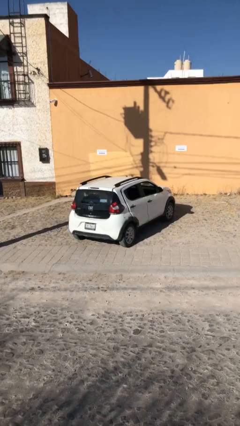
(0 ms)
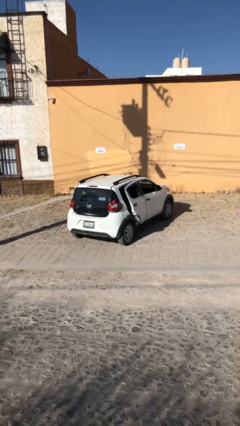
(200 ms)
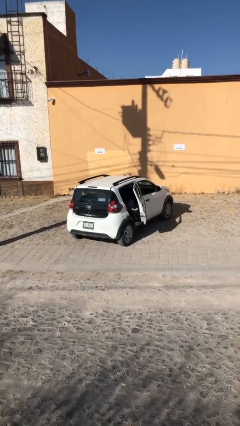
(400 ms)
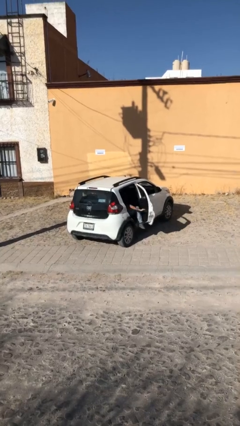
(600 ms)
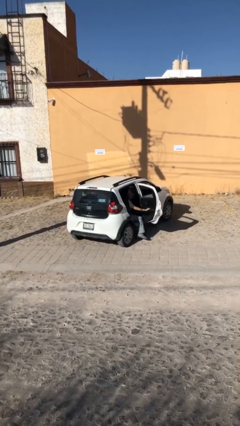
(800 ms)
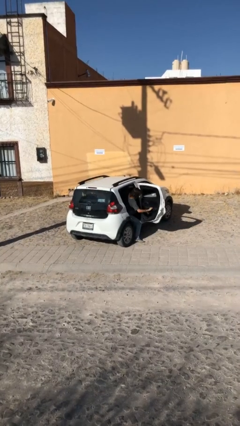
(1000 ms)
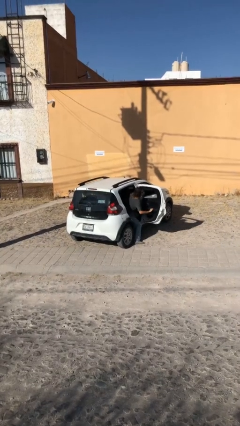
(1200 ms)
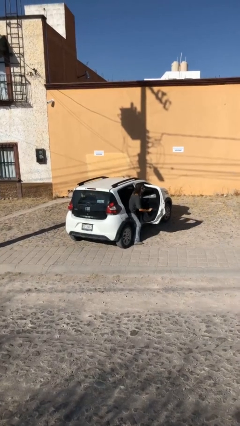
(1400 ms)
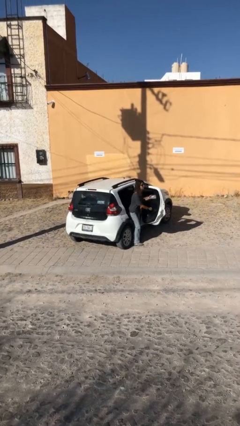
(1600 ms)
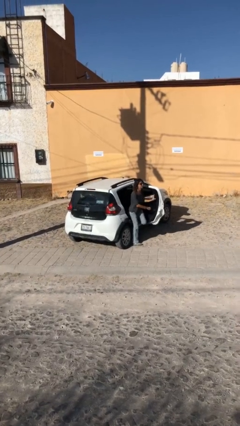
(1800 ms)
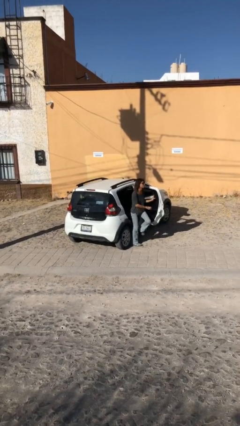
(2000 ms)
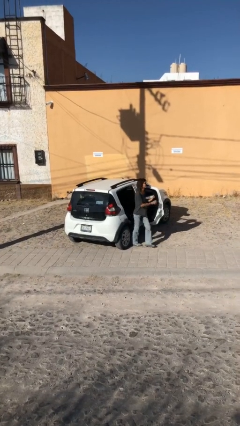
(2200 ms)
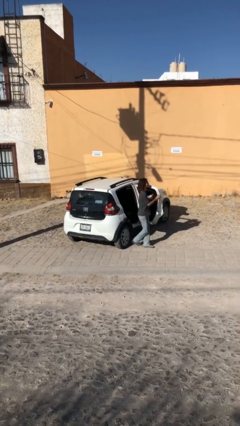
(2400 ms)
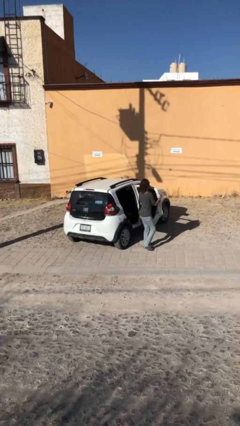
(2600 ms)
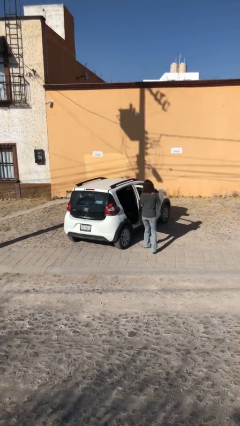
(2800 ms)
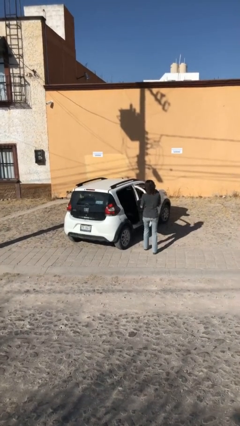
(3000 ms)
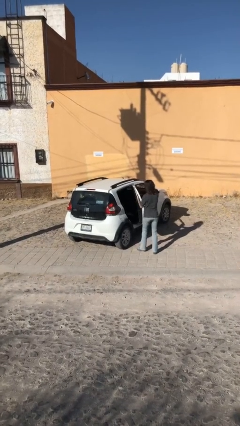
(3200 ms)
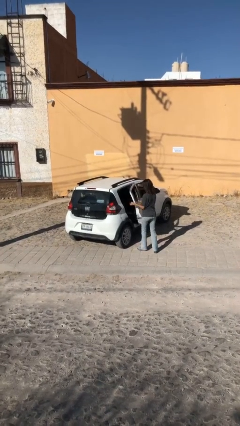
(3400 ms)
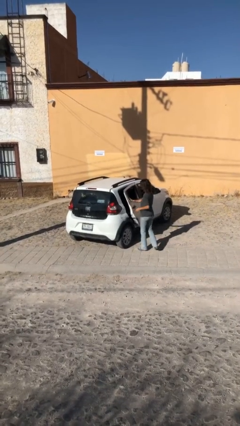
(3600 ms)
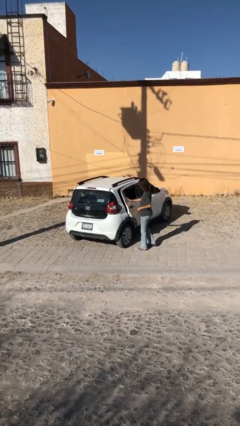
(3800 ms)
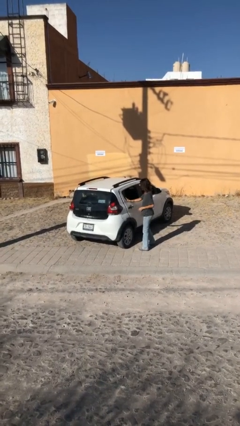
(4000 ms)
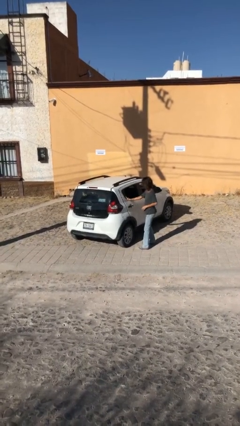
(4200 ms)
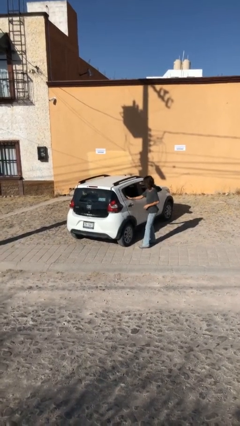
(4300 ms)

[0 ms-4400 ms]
car drops off person

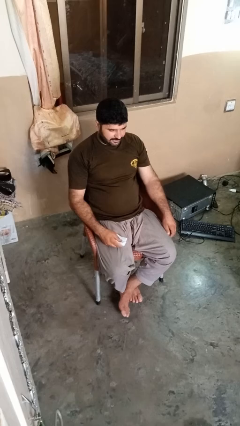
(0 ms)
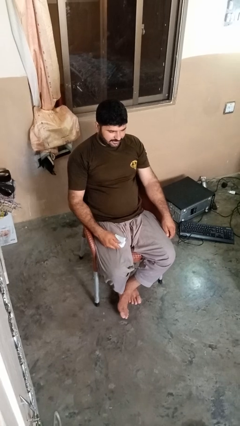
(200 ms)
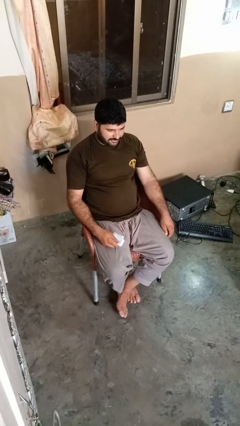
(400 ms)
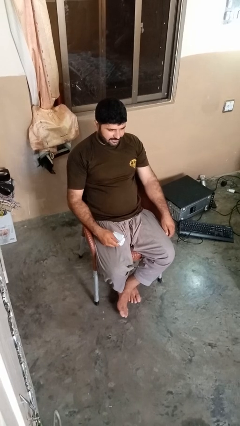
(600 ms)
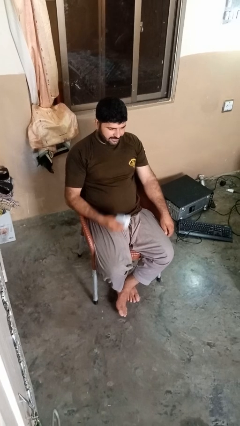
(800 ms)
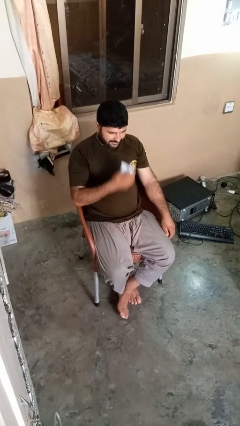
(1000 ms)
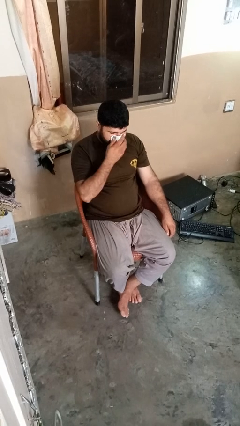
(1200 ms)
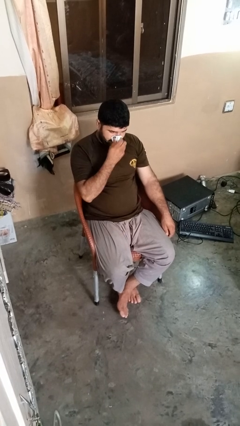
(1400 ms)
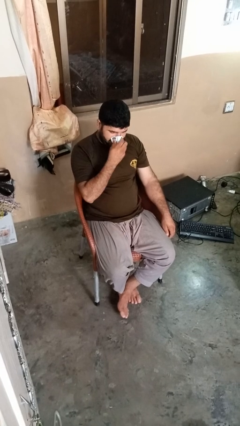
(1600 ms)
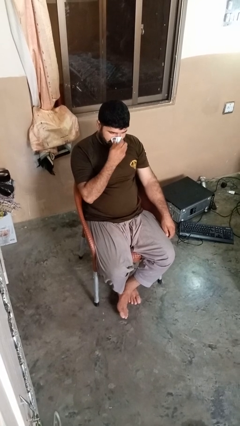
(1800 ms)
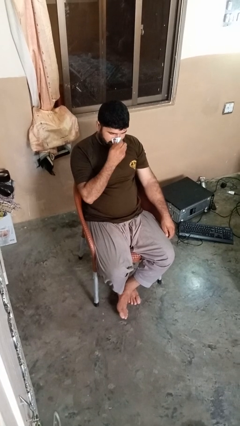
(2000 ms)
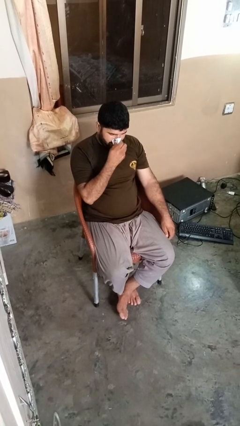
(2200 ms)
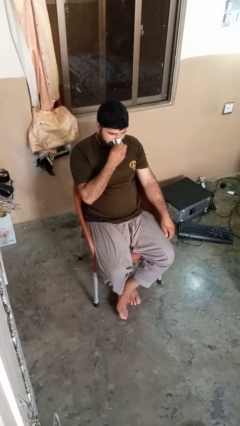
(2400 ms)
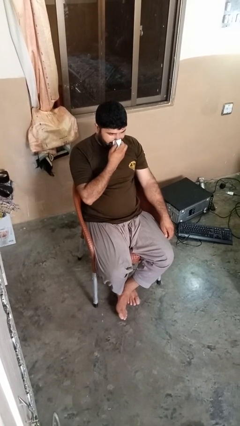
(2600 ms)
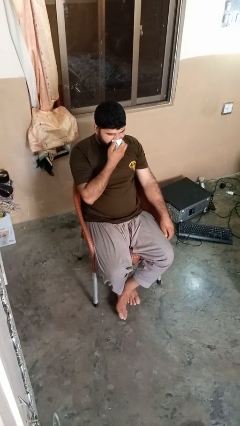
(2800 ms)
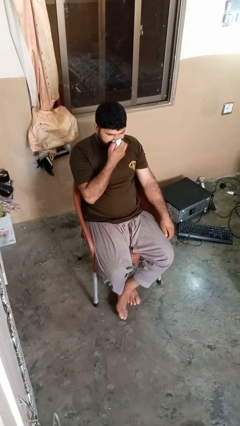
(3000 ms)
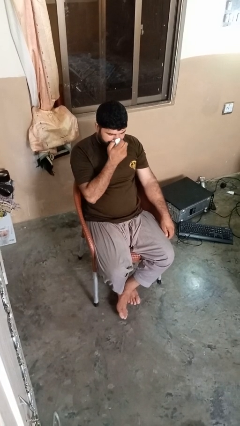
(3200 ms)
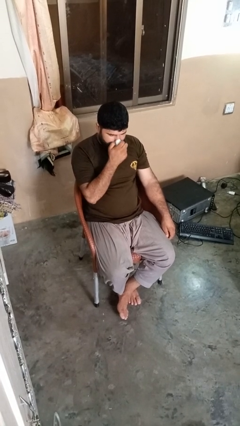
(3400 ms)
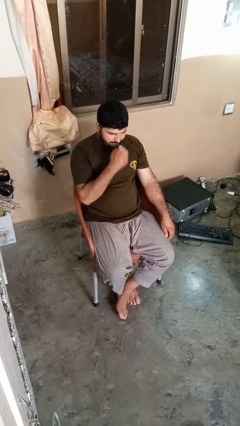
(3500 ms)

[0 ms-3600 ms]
person blows nose

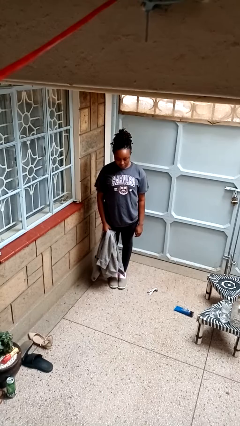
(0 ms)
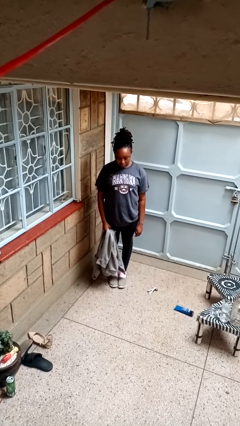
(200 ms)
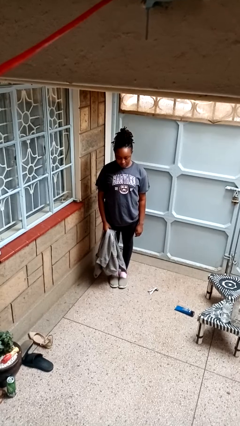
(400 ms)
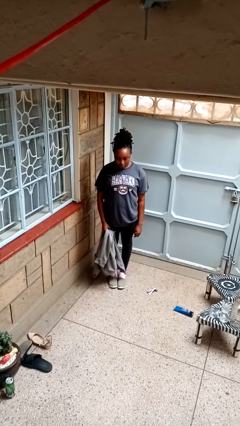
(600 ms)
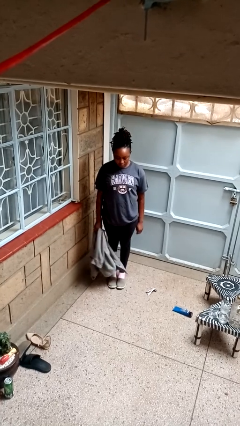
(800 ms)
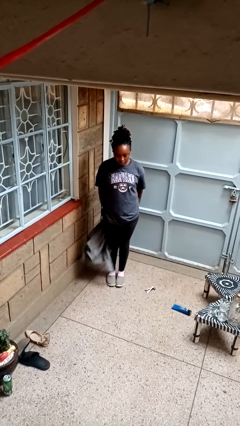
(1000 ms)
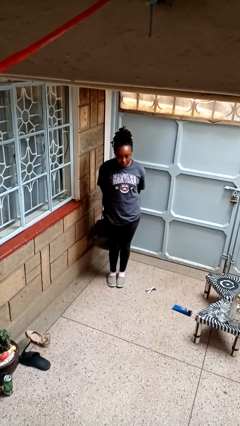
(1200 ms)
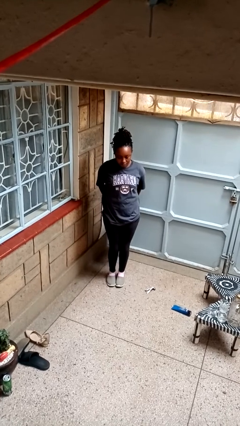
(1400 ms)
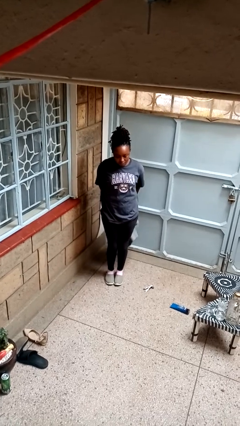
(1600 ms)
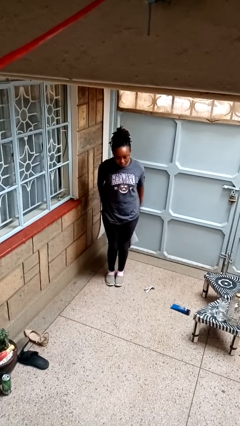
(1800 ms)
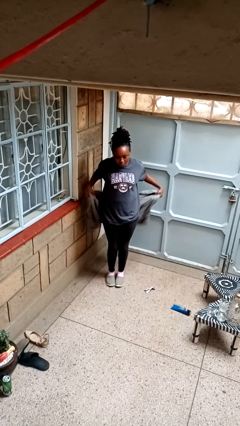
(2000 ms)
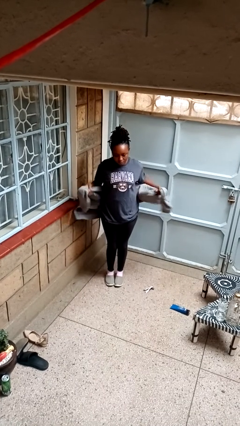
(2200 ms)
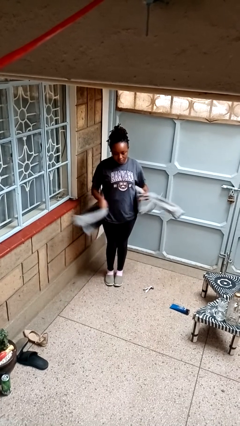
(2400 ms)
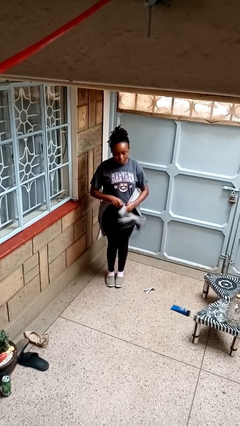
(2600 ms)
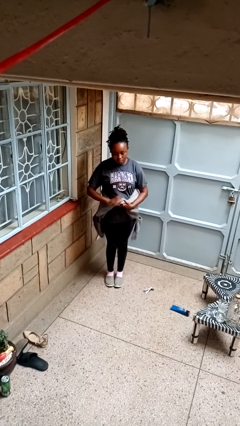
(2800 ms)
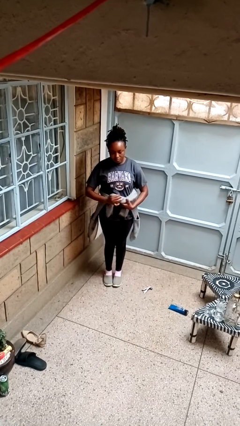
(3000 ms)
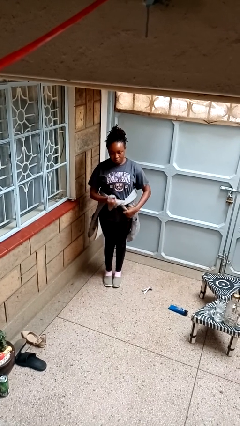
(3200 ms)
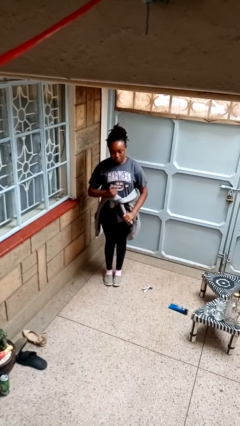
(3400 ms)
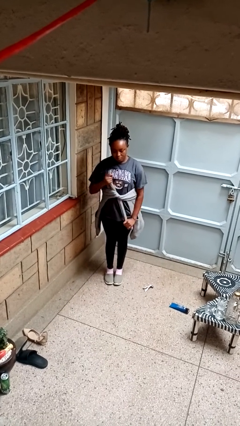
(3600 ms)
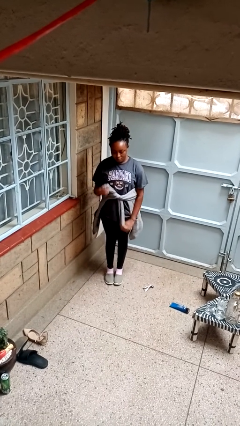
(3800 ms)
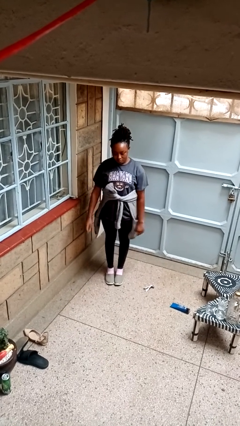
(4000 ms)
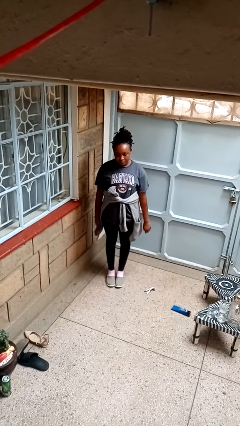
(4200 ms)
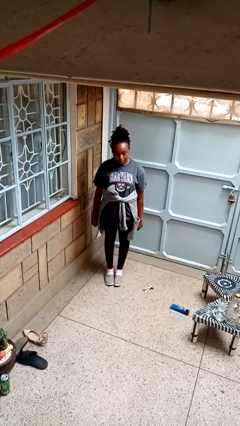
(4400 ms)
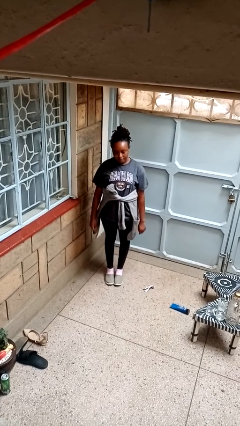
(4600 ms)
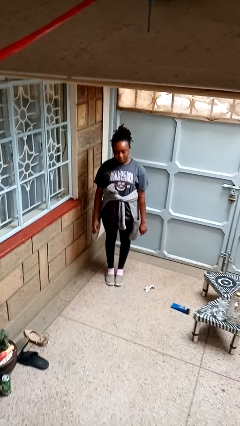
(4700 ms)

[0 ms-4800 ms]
person ties jacket around waist

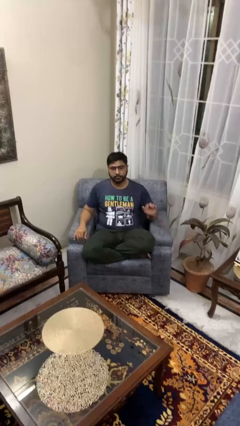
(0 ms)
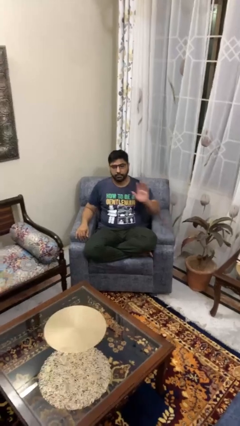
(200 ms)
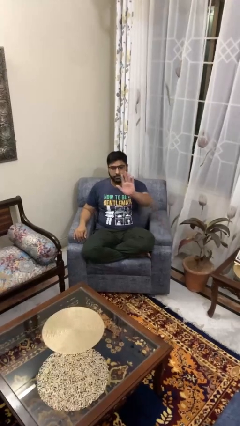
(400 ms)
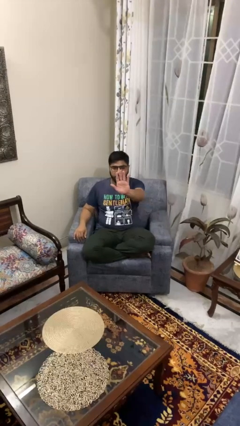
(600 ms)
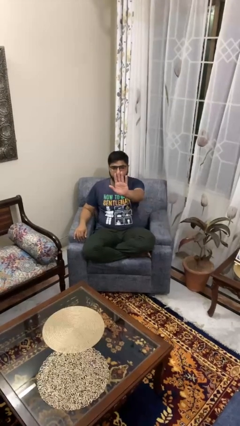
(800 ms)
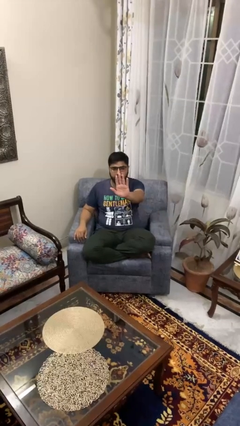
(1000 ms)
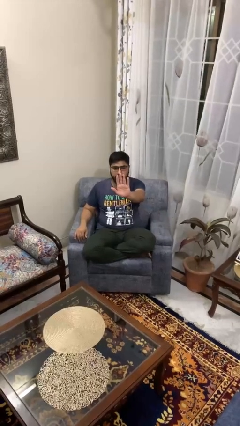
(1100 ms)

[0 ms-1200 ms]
person gestures stop

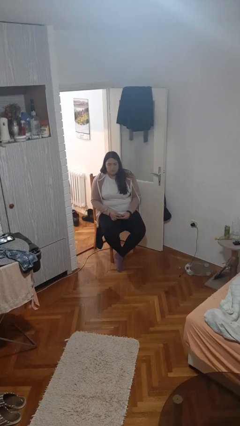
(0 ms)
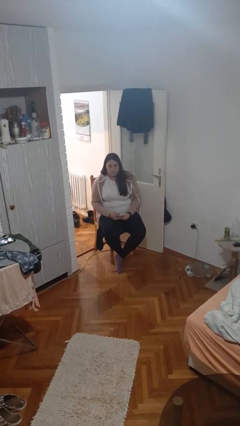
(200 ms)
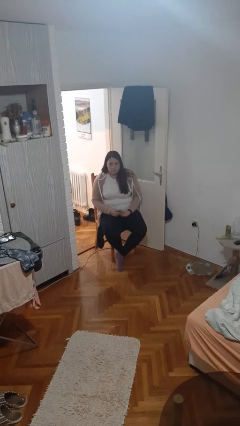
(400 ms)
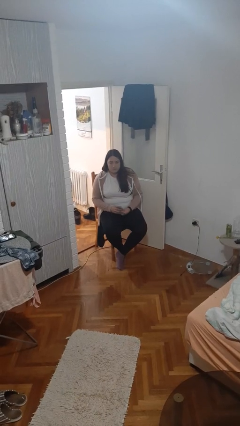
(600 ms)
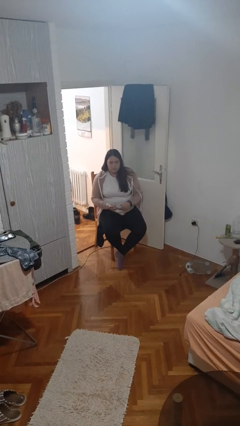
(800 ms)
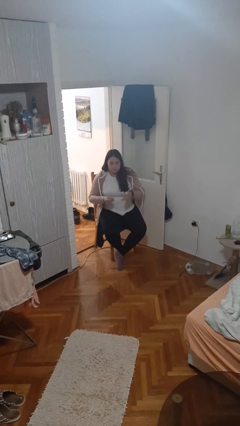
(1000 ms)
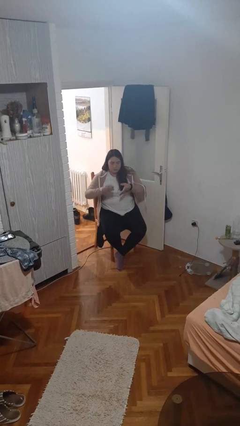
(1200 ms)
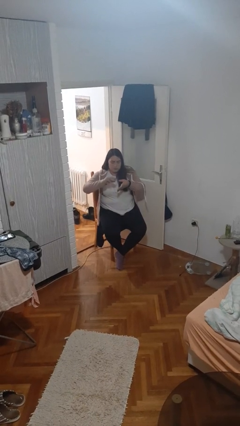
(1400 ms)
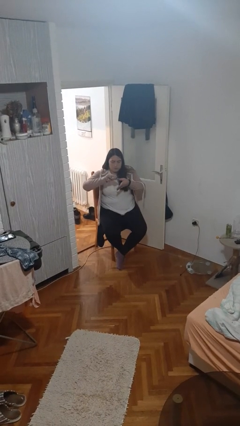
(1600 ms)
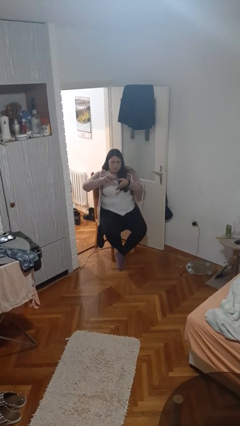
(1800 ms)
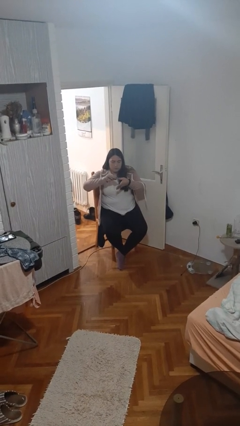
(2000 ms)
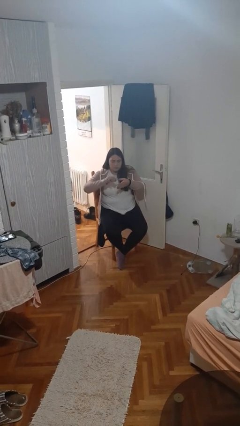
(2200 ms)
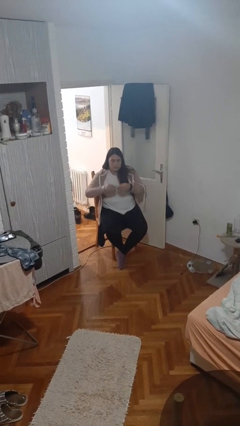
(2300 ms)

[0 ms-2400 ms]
person clips fingernails

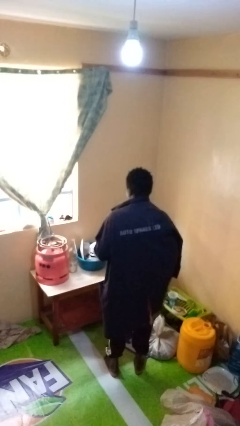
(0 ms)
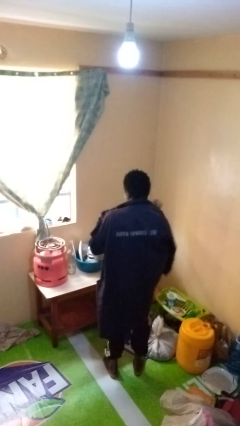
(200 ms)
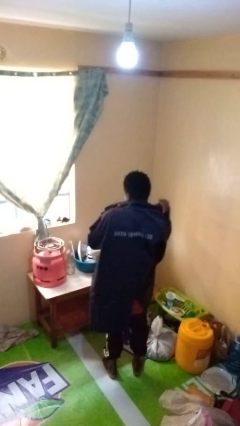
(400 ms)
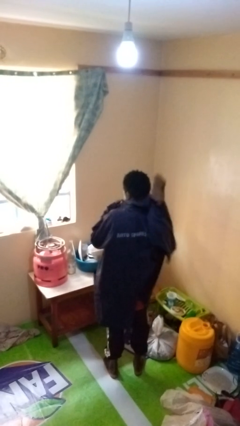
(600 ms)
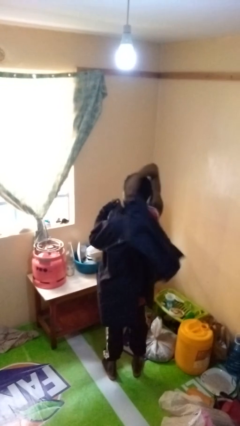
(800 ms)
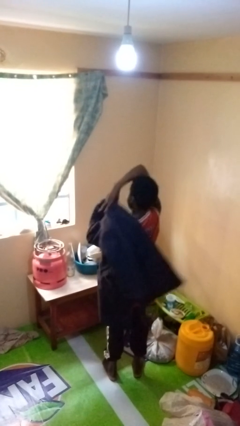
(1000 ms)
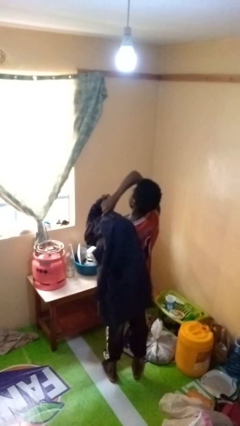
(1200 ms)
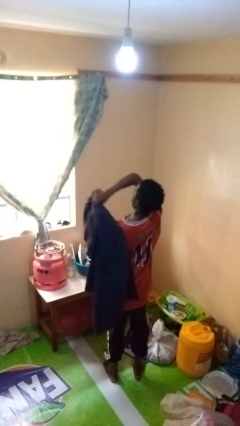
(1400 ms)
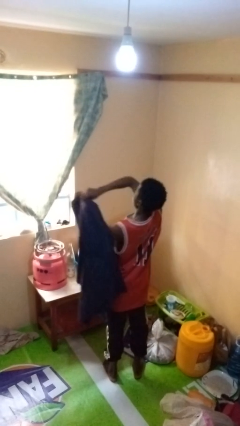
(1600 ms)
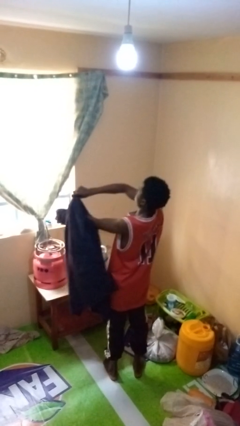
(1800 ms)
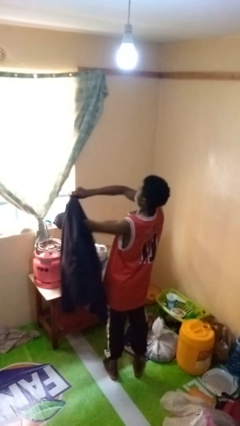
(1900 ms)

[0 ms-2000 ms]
person takes off apron
